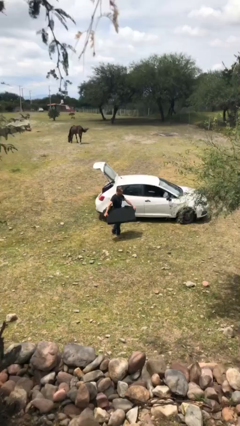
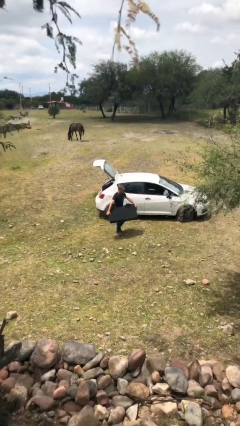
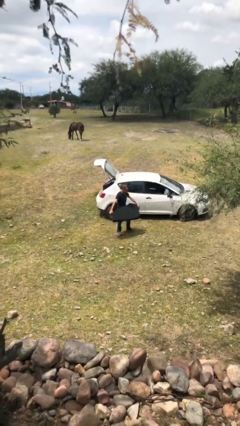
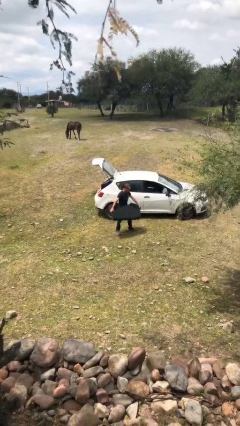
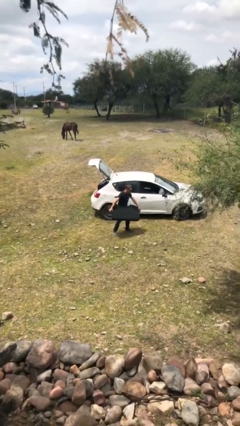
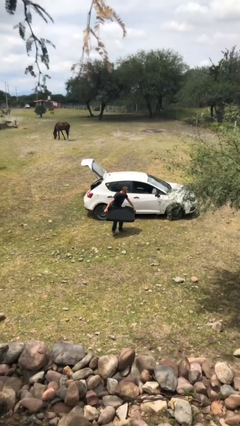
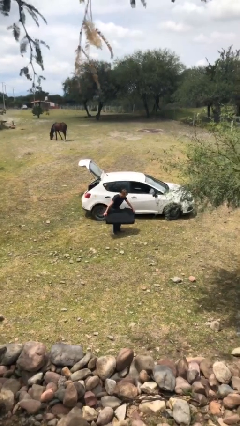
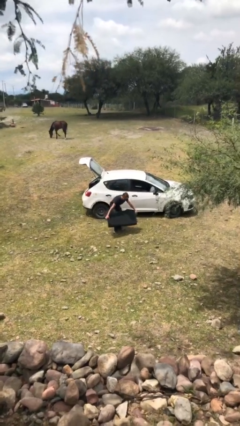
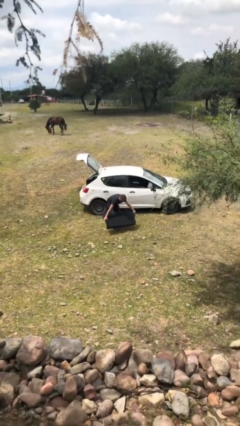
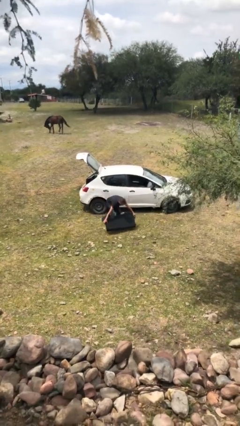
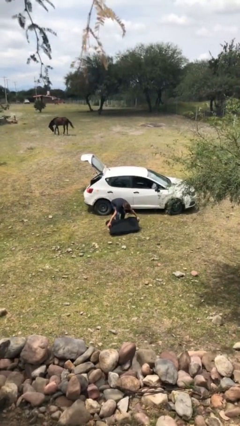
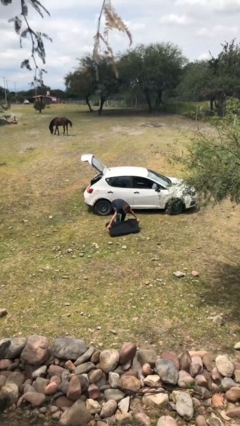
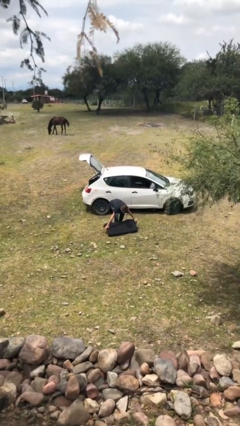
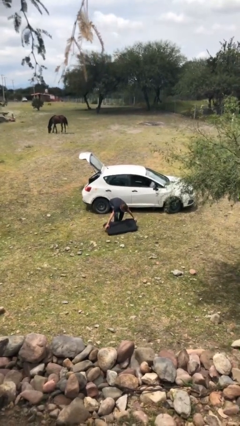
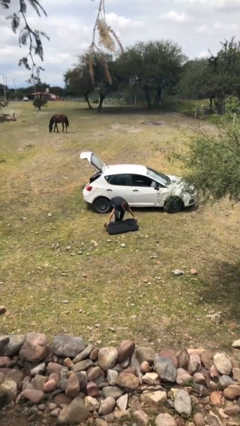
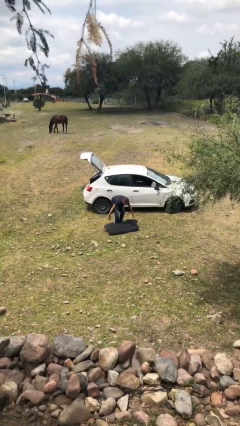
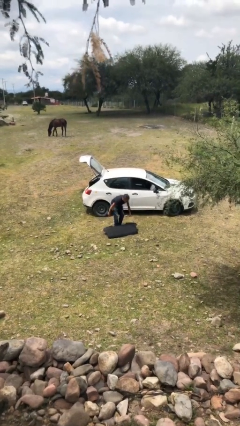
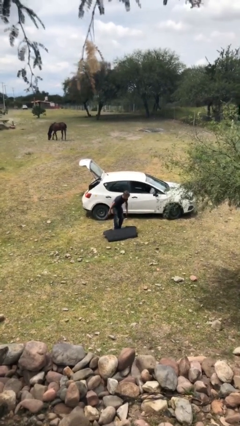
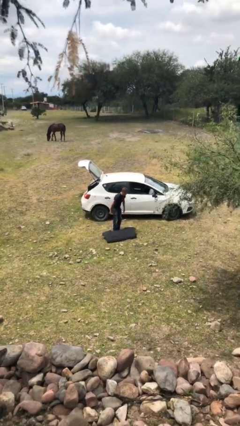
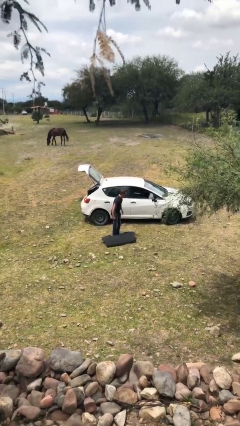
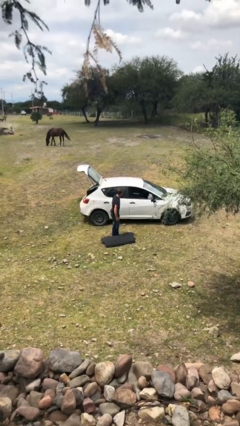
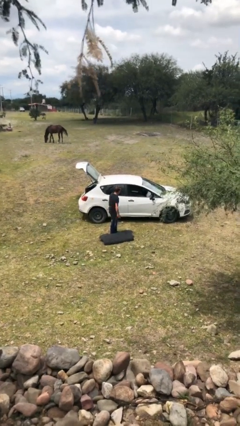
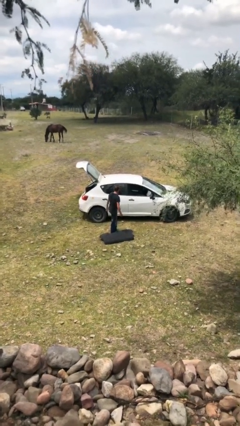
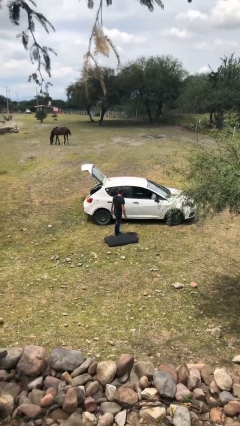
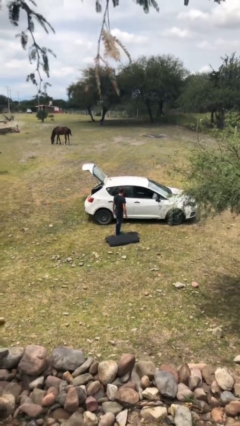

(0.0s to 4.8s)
person puts down object on floor

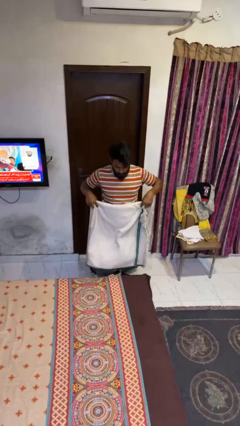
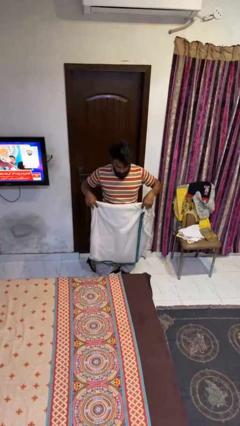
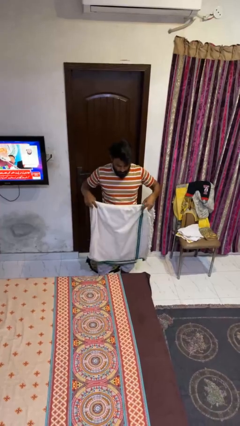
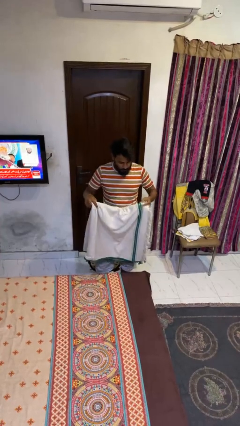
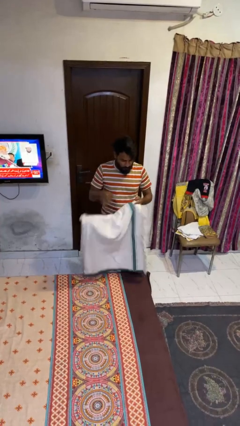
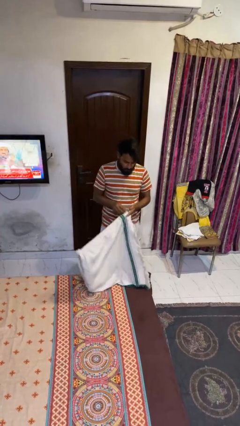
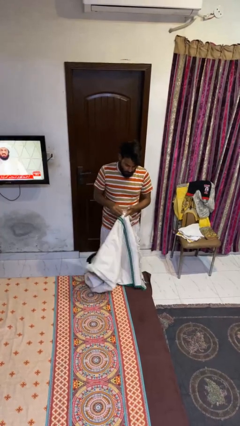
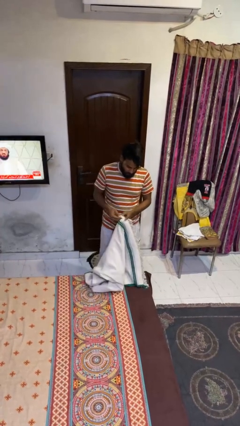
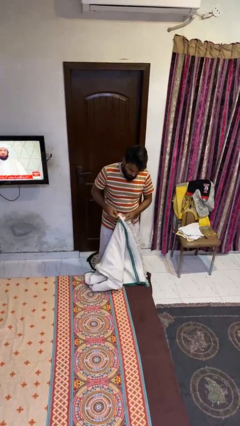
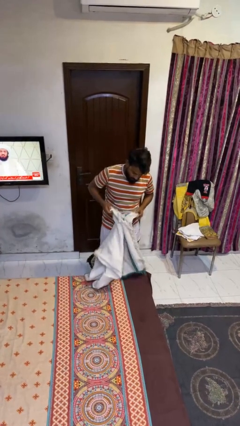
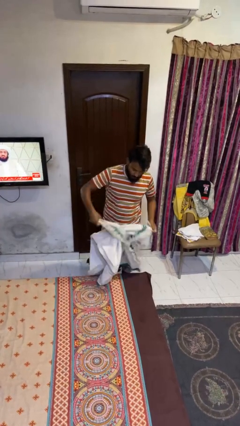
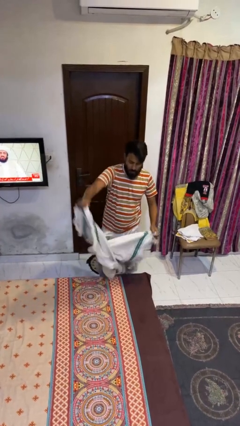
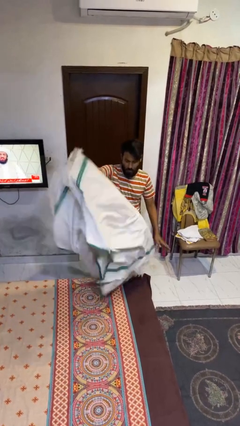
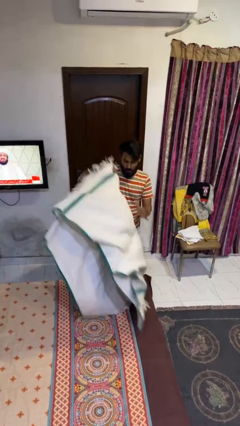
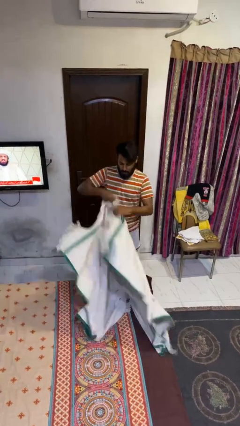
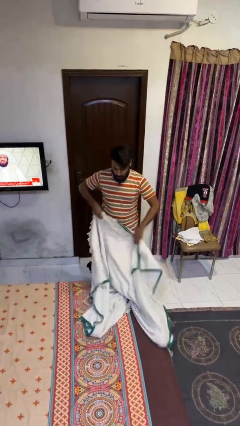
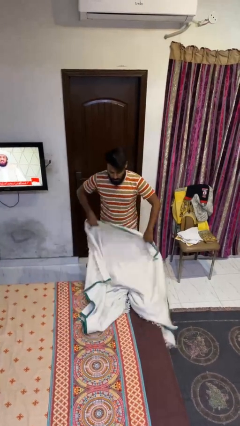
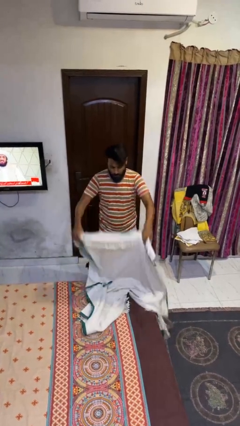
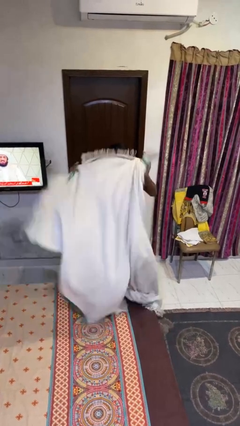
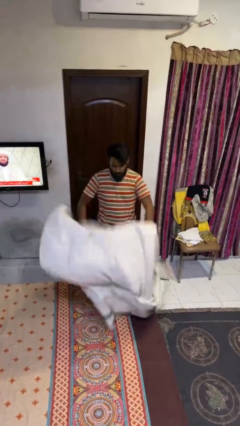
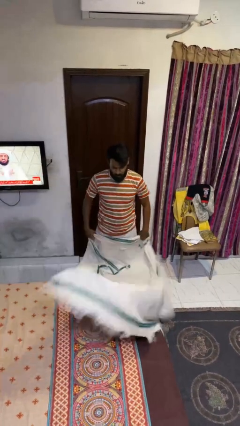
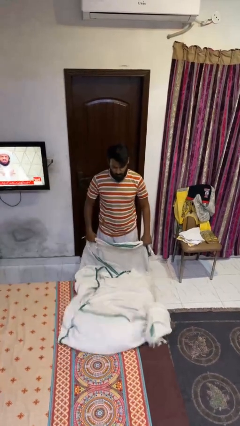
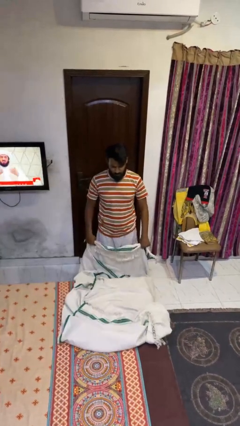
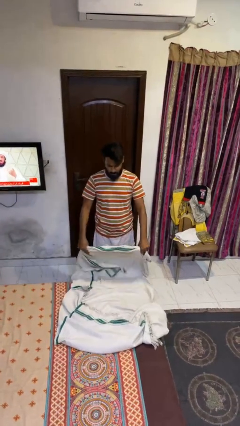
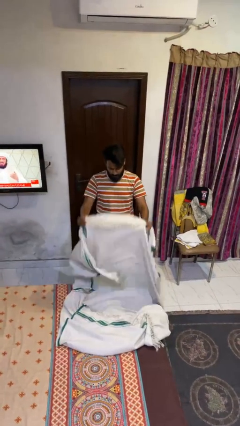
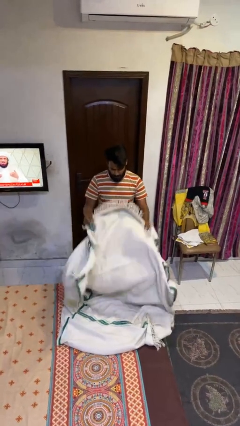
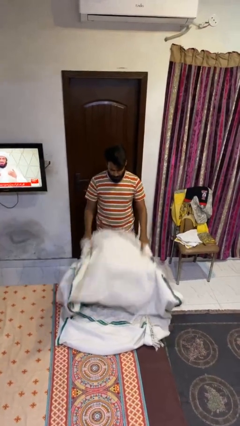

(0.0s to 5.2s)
person unfolds blanket

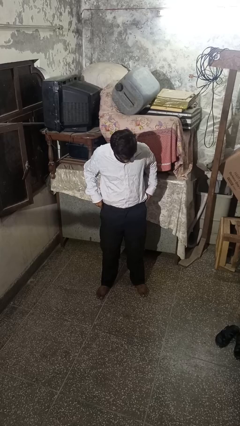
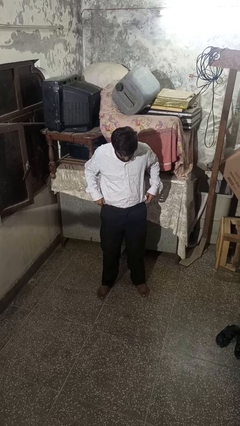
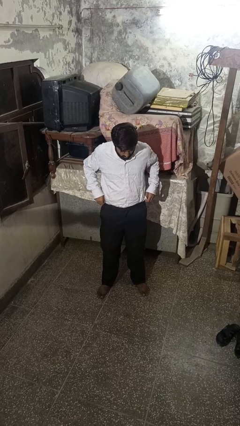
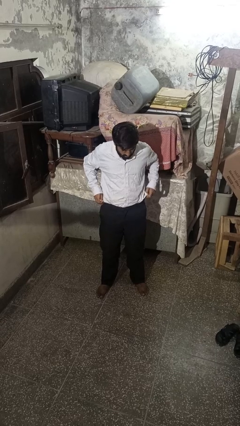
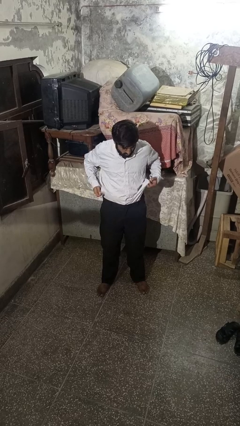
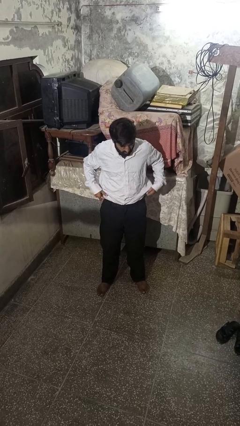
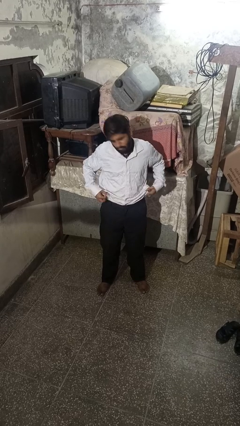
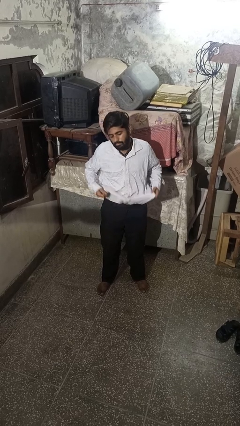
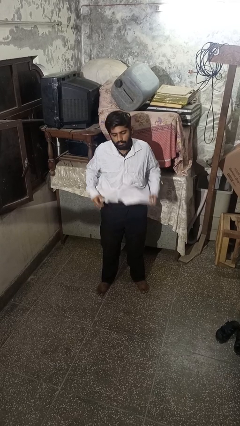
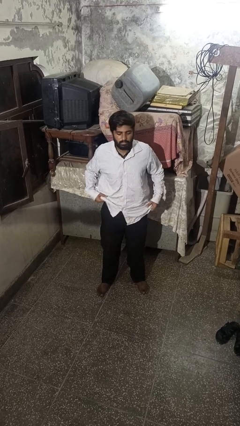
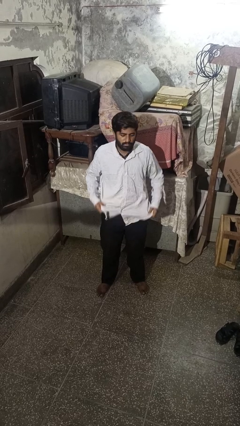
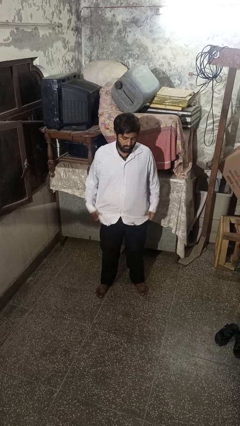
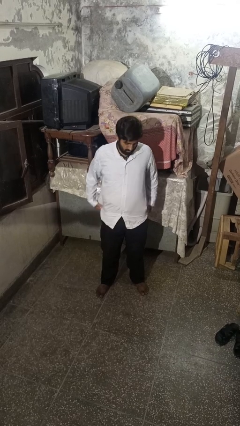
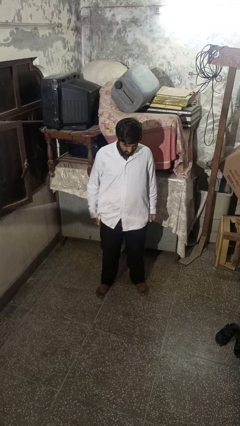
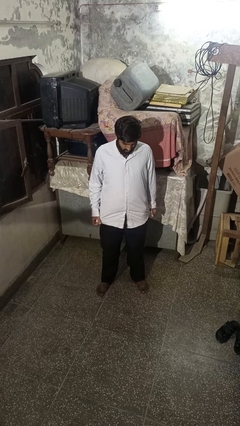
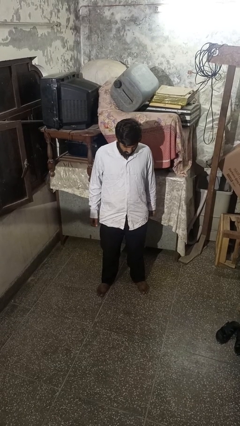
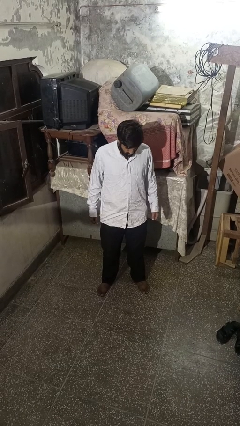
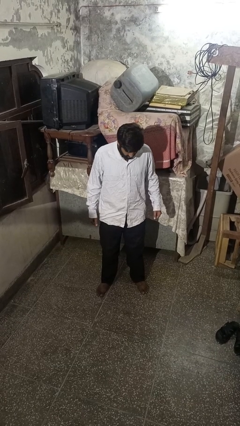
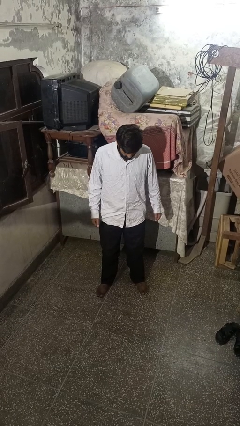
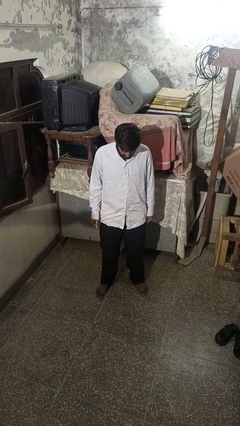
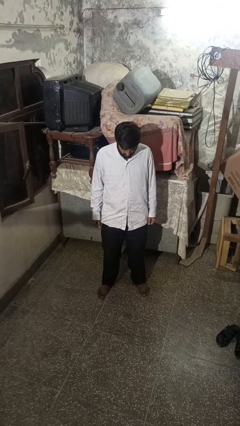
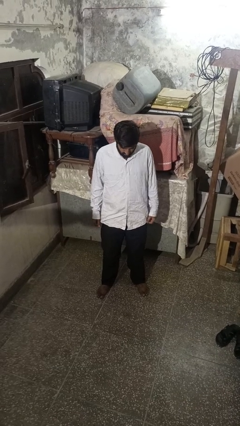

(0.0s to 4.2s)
person untucks shirt

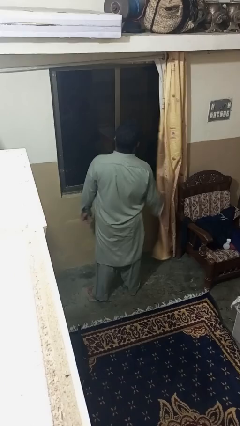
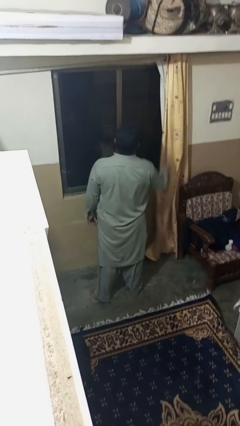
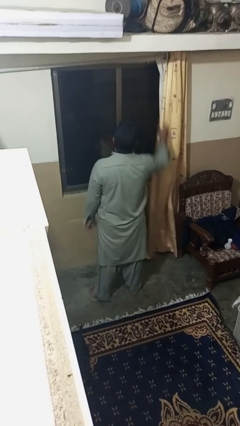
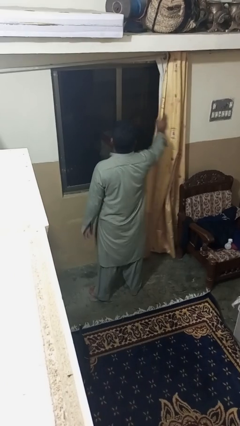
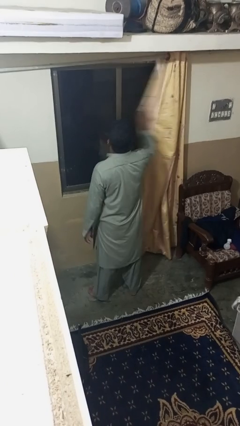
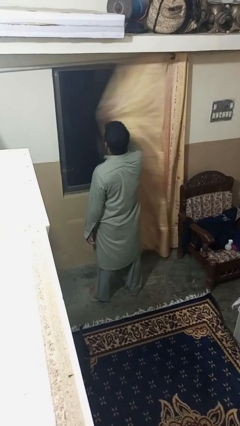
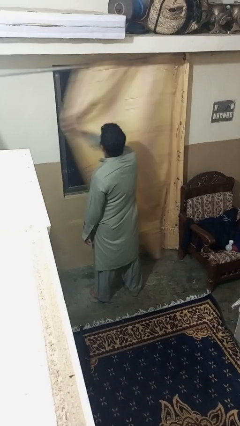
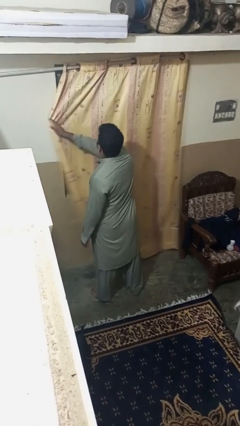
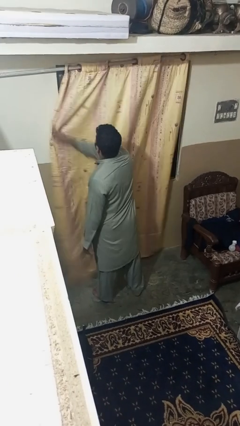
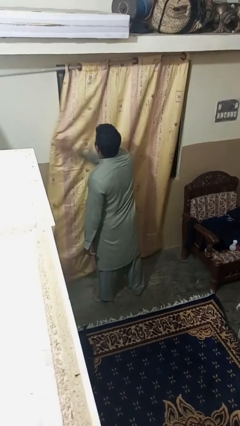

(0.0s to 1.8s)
person closes curtains

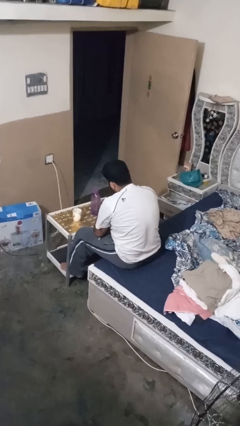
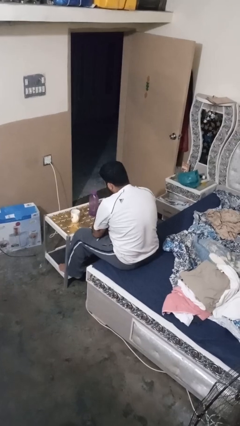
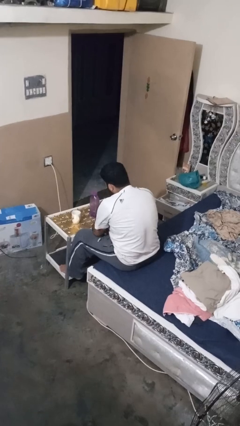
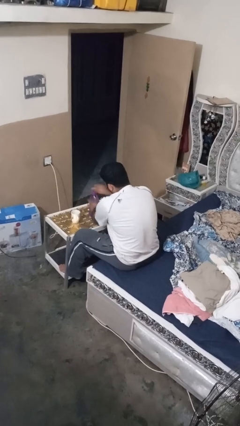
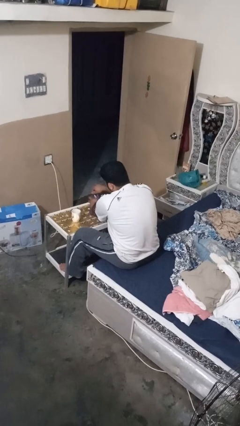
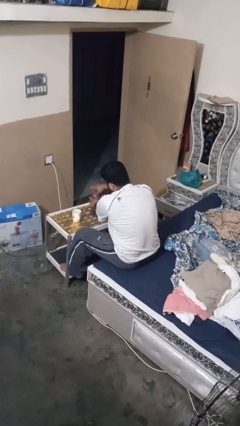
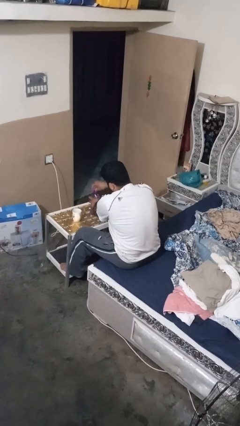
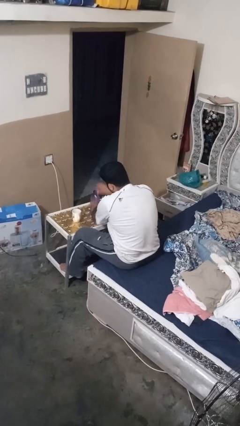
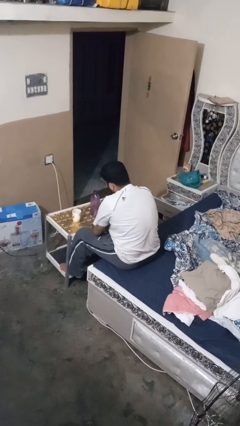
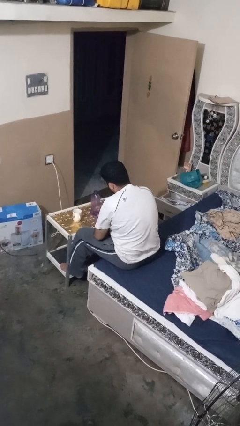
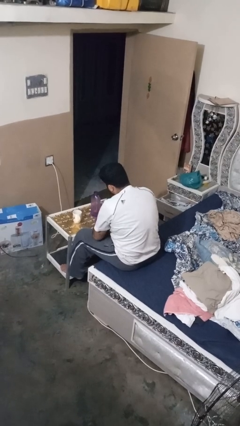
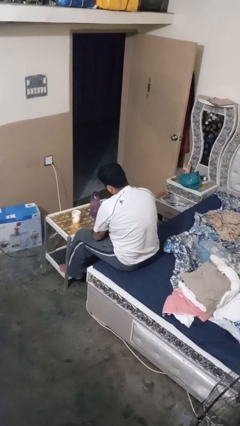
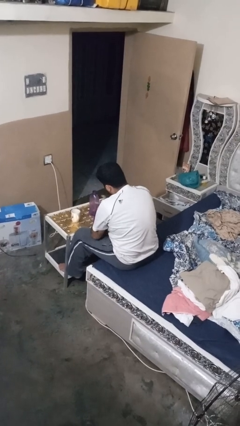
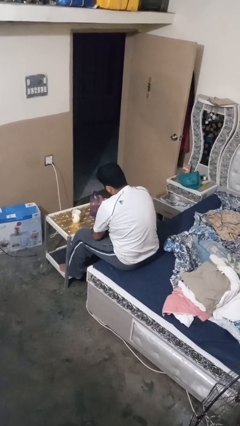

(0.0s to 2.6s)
person unscrews lid from bottle
